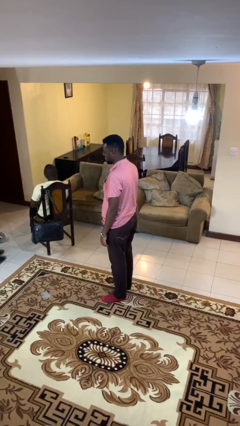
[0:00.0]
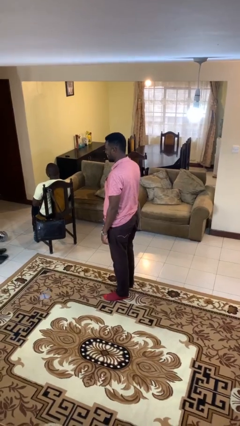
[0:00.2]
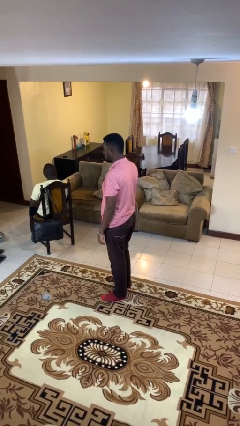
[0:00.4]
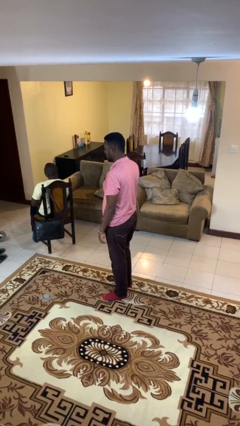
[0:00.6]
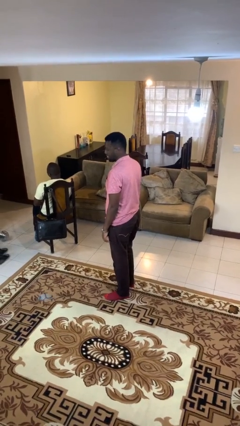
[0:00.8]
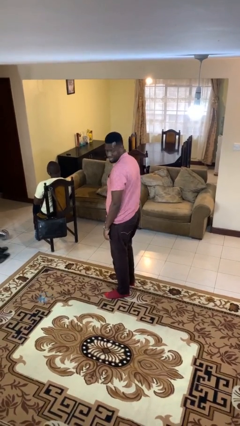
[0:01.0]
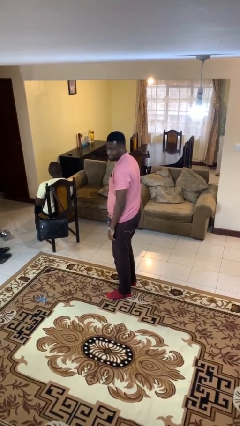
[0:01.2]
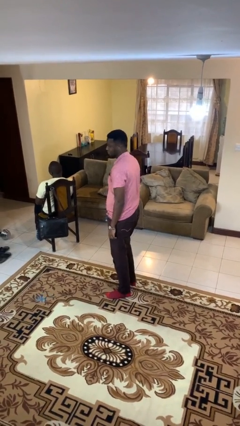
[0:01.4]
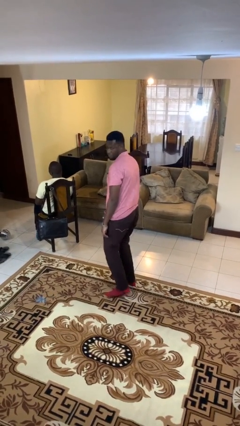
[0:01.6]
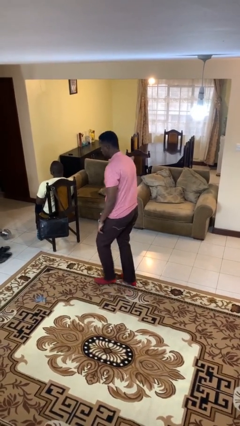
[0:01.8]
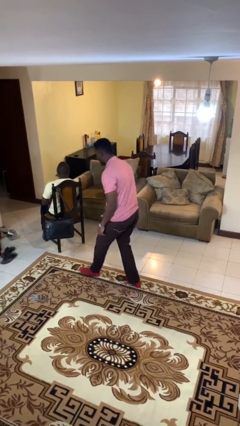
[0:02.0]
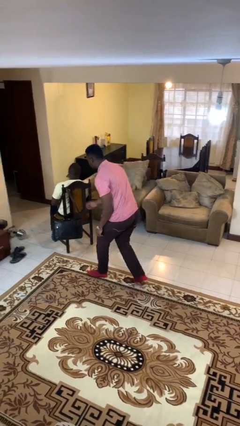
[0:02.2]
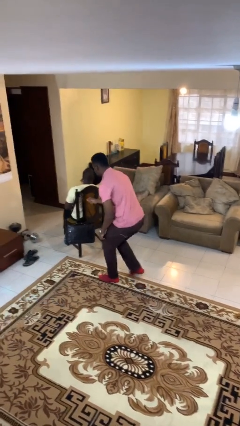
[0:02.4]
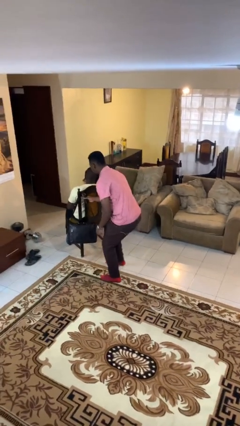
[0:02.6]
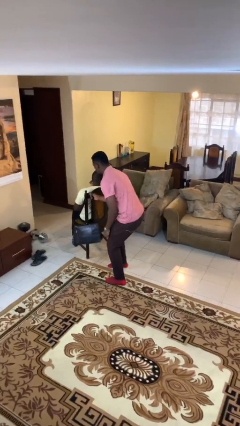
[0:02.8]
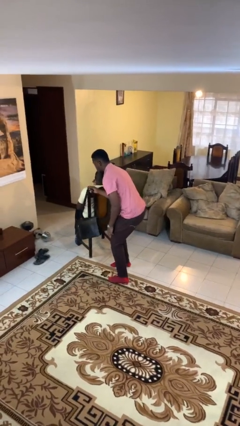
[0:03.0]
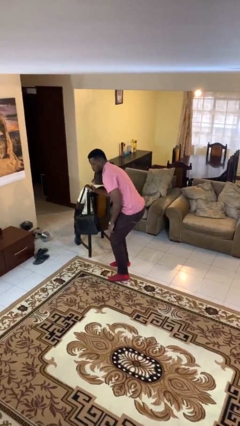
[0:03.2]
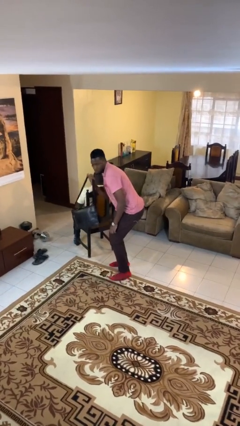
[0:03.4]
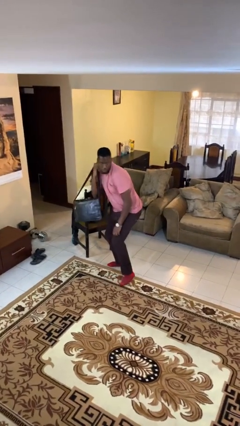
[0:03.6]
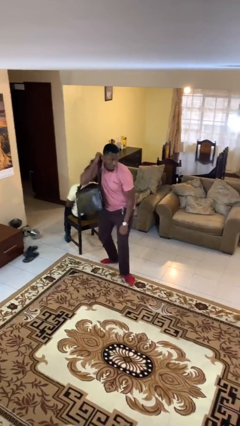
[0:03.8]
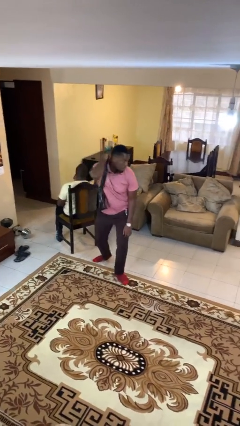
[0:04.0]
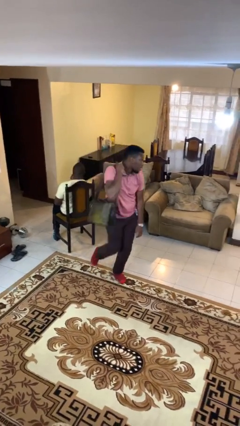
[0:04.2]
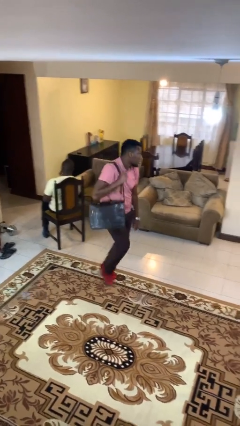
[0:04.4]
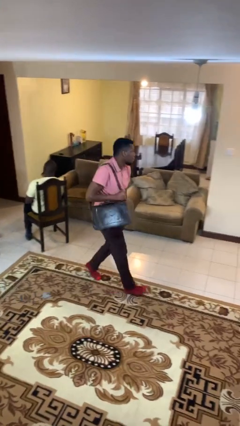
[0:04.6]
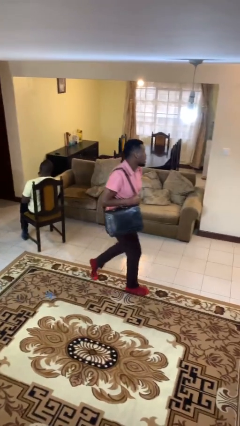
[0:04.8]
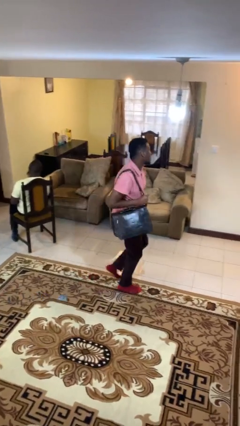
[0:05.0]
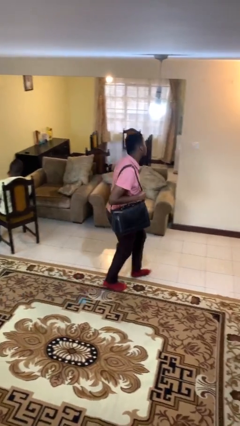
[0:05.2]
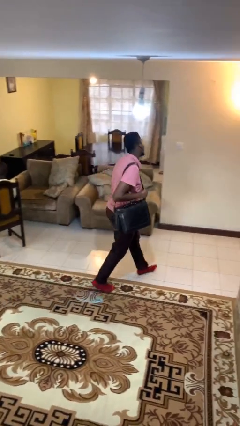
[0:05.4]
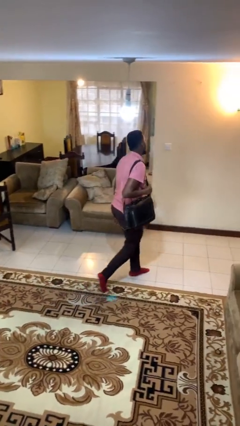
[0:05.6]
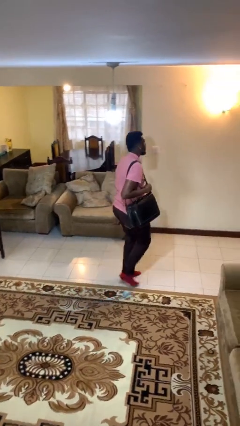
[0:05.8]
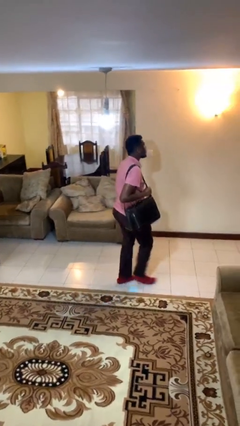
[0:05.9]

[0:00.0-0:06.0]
person steals object from person

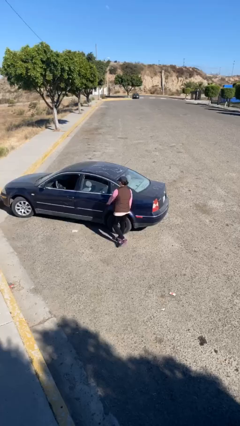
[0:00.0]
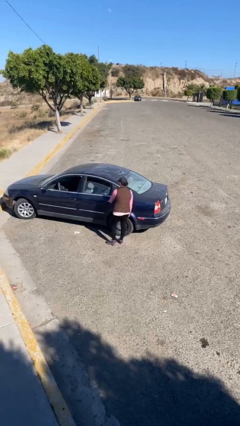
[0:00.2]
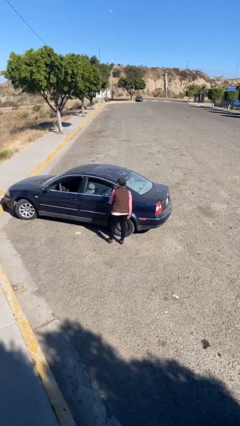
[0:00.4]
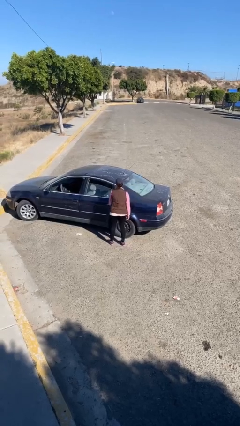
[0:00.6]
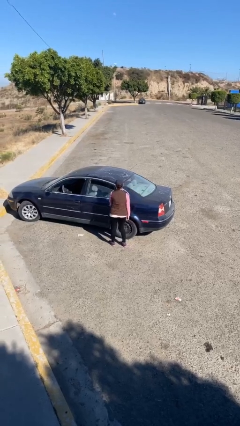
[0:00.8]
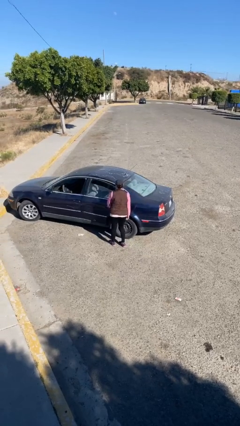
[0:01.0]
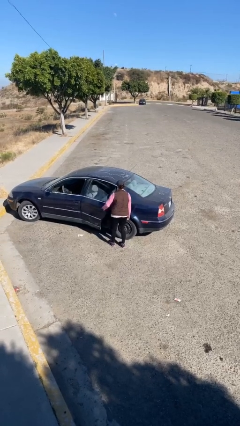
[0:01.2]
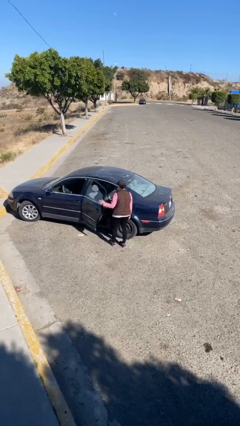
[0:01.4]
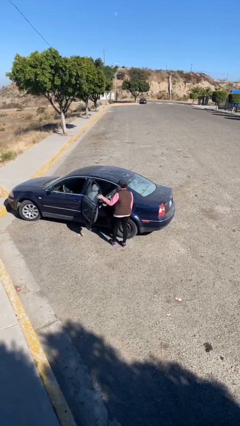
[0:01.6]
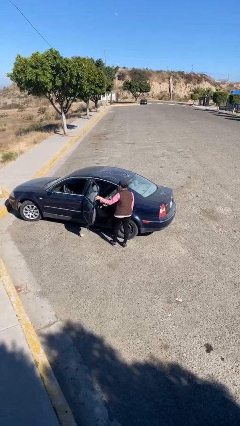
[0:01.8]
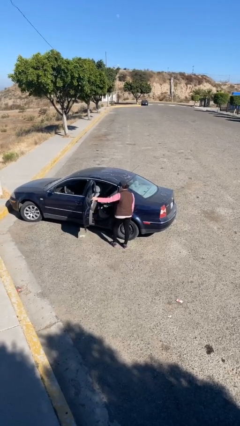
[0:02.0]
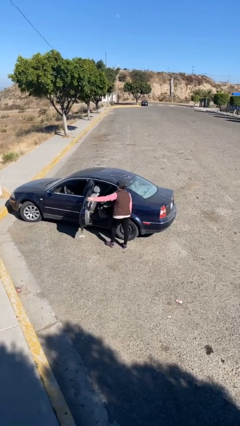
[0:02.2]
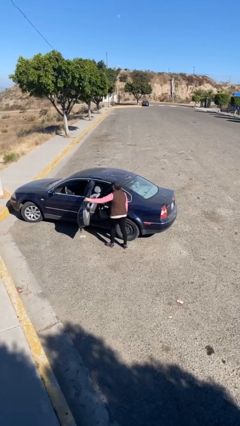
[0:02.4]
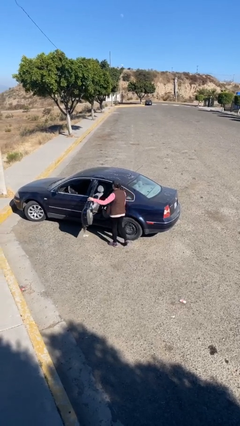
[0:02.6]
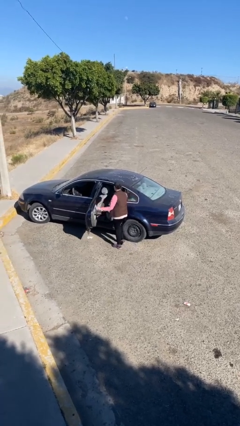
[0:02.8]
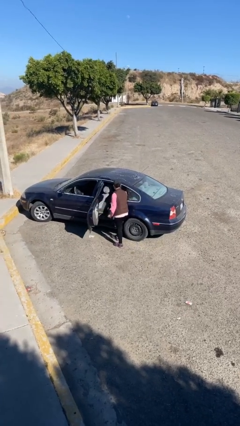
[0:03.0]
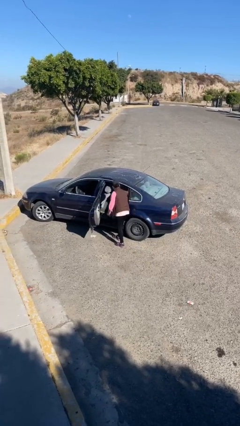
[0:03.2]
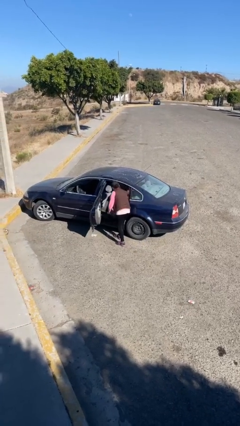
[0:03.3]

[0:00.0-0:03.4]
person opens car door

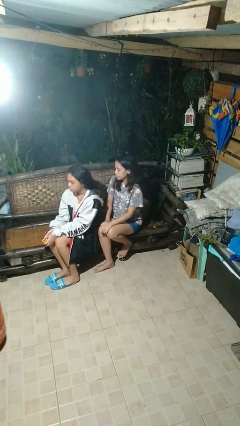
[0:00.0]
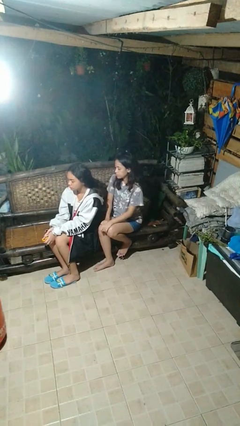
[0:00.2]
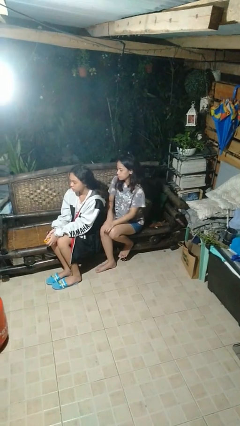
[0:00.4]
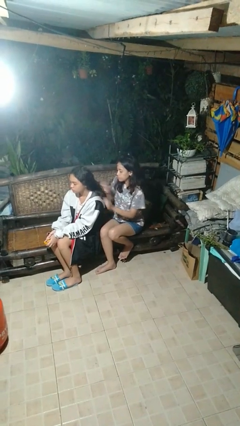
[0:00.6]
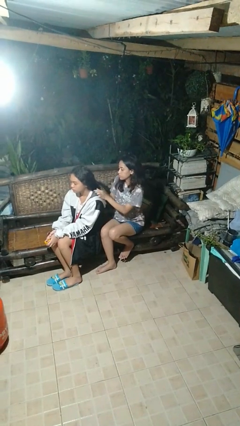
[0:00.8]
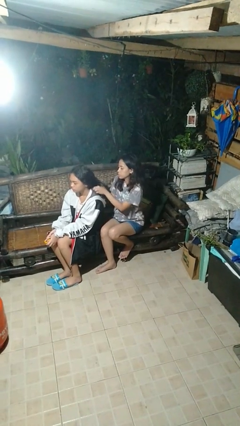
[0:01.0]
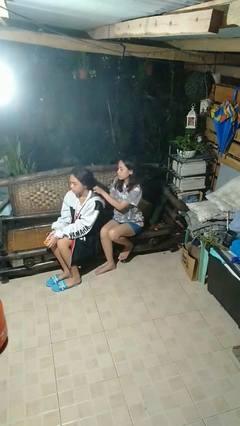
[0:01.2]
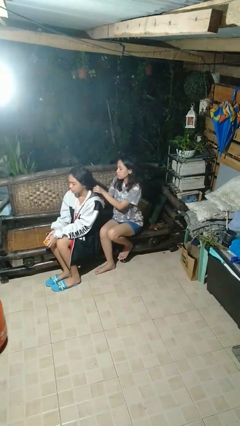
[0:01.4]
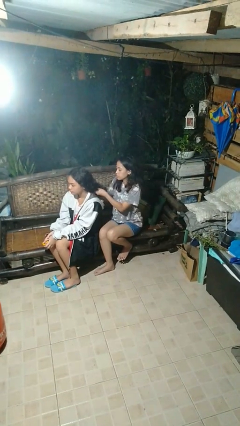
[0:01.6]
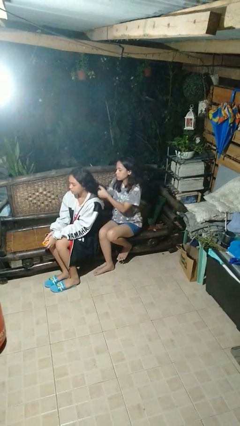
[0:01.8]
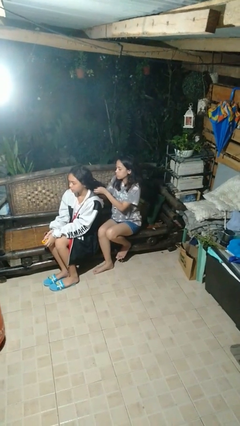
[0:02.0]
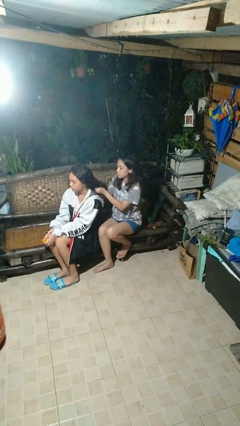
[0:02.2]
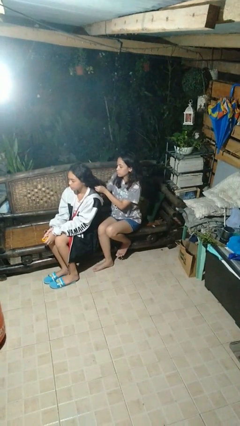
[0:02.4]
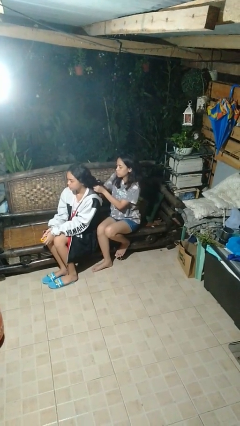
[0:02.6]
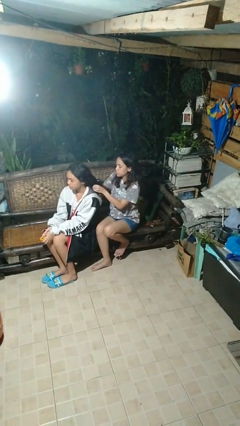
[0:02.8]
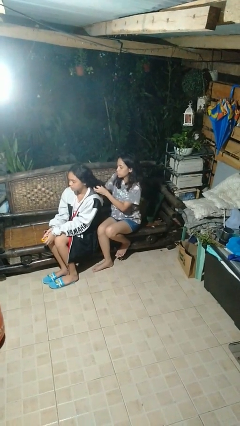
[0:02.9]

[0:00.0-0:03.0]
person braids hair of person

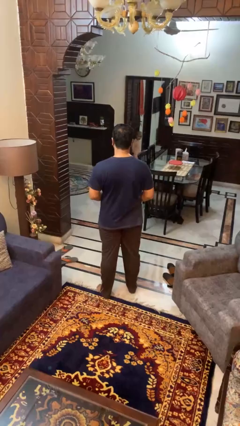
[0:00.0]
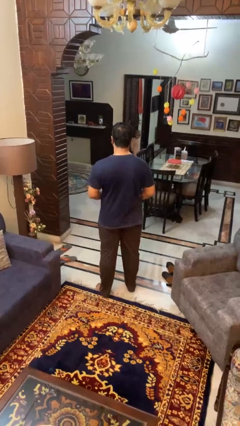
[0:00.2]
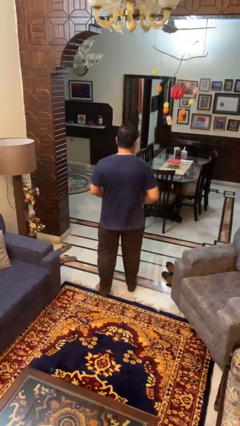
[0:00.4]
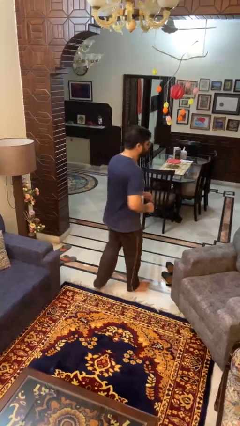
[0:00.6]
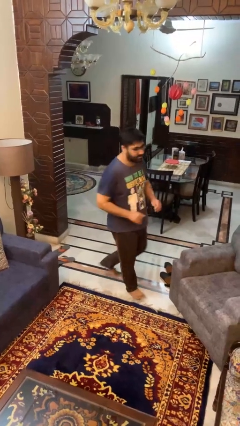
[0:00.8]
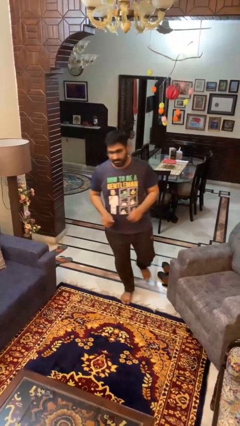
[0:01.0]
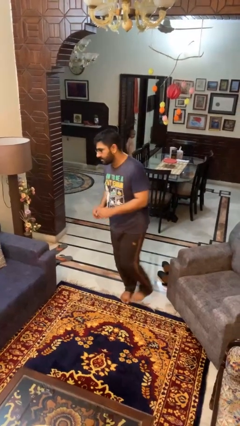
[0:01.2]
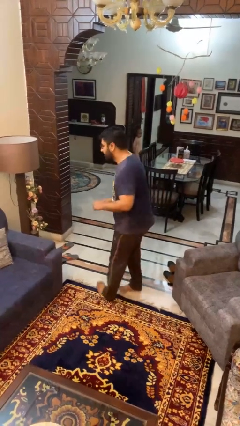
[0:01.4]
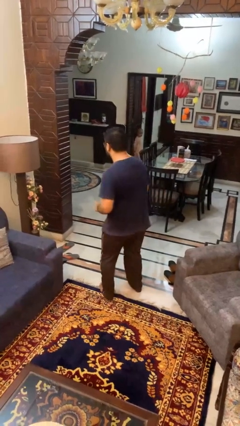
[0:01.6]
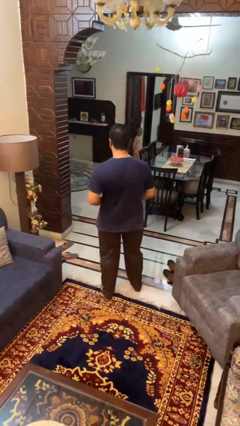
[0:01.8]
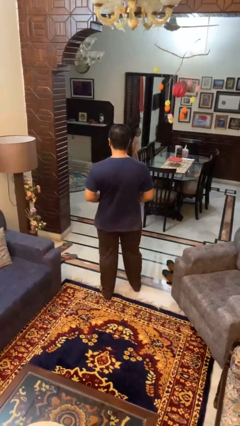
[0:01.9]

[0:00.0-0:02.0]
person twirls

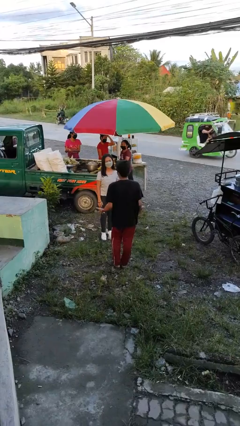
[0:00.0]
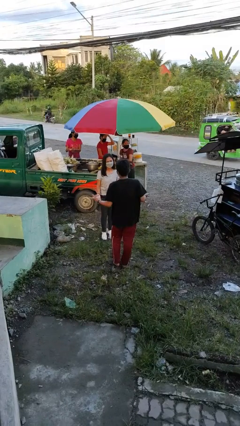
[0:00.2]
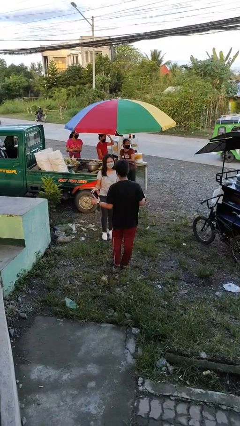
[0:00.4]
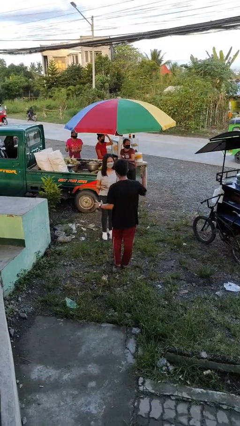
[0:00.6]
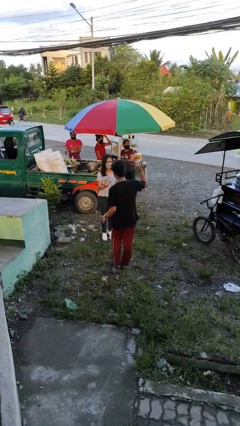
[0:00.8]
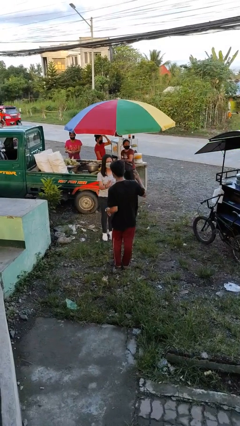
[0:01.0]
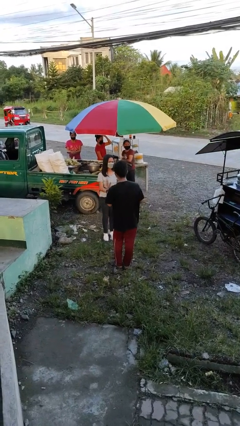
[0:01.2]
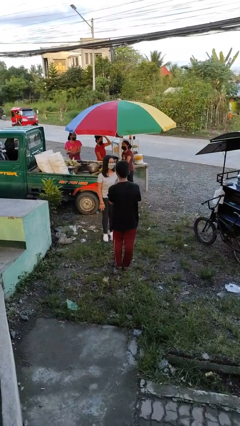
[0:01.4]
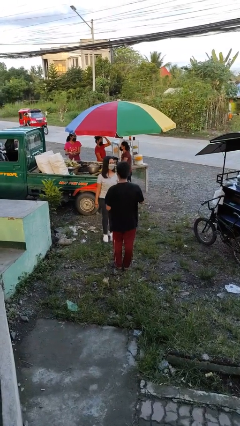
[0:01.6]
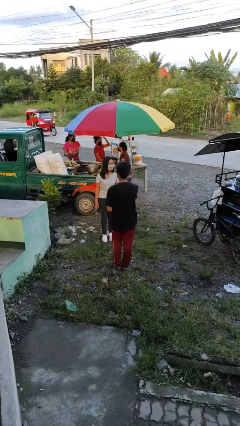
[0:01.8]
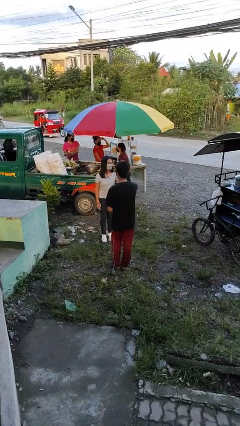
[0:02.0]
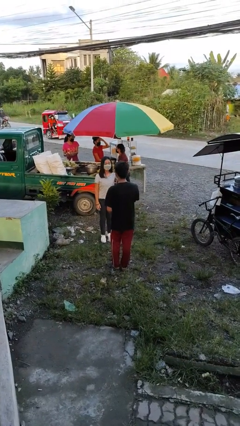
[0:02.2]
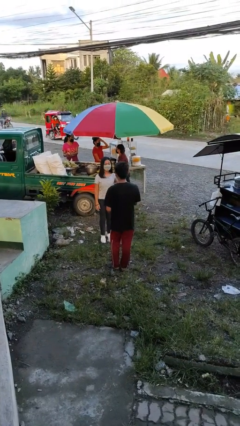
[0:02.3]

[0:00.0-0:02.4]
person talks to person

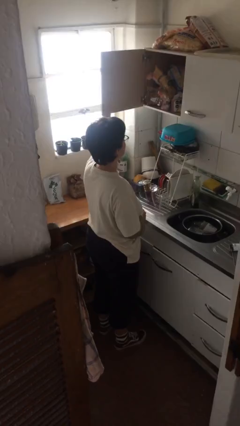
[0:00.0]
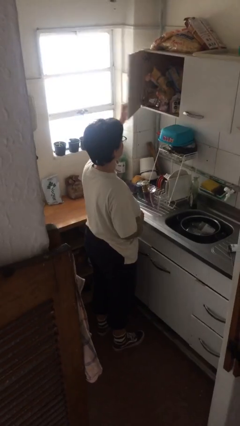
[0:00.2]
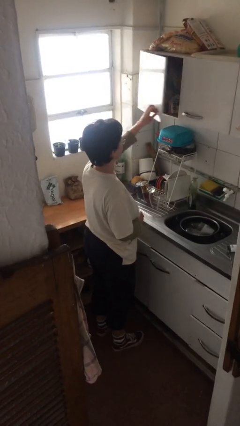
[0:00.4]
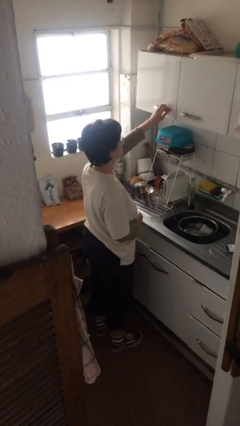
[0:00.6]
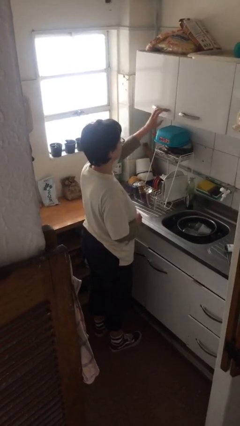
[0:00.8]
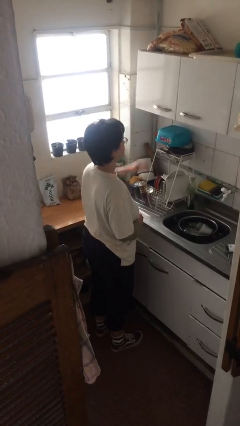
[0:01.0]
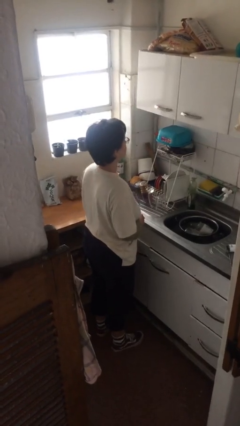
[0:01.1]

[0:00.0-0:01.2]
person closes cabinet
